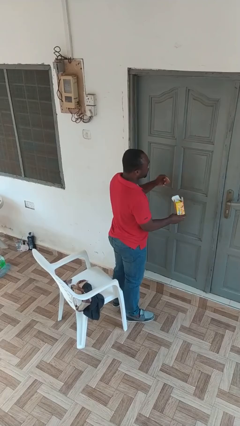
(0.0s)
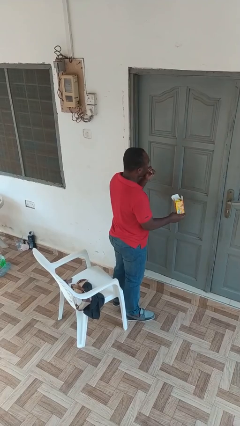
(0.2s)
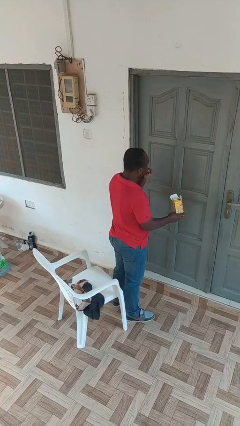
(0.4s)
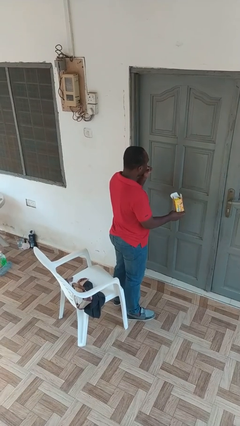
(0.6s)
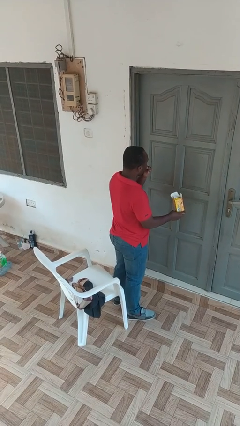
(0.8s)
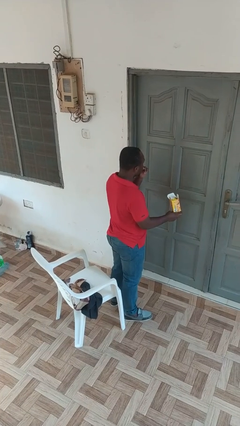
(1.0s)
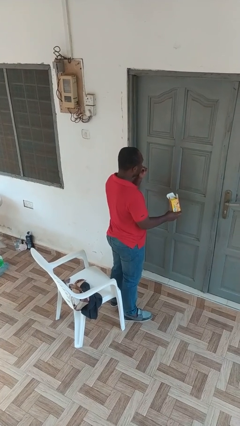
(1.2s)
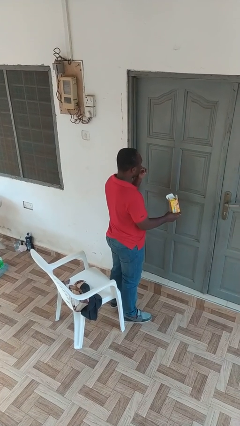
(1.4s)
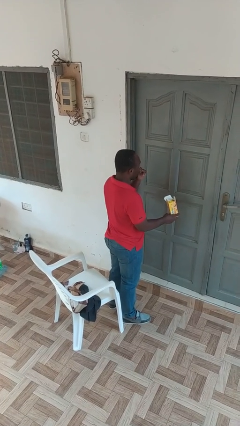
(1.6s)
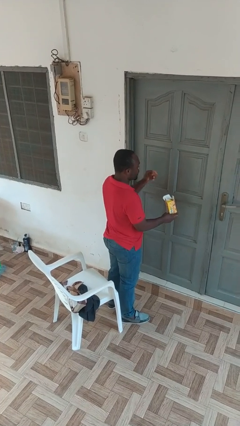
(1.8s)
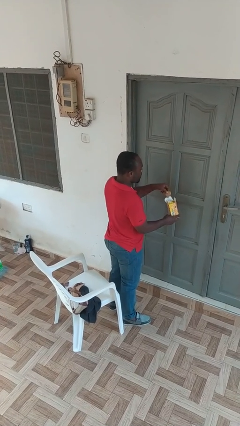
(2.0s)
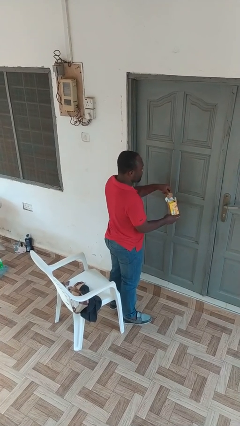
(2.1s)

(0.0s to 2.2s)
person eats snack from bag

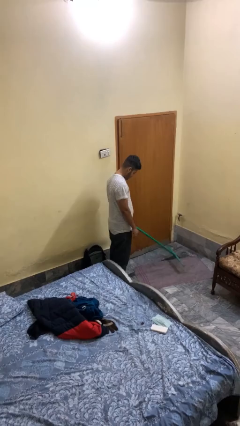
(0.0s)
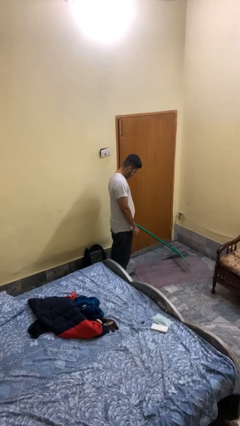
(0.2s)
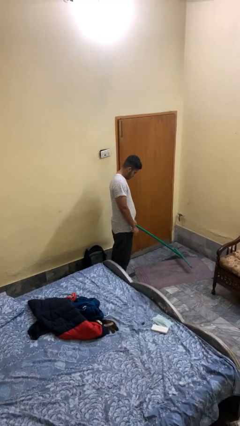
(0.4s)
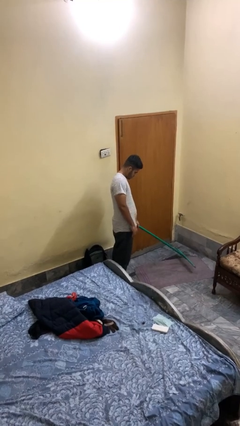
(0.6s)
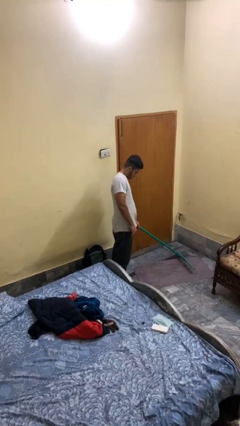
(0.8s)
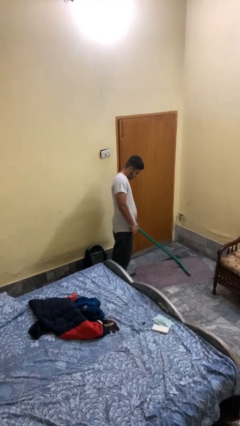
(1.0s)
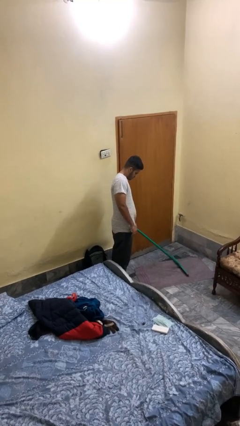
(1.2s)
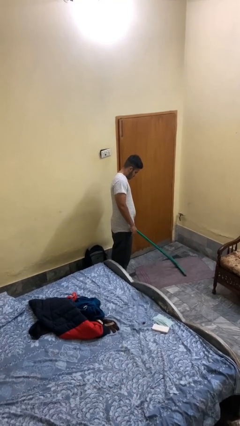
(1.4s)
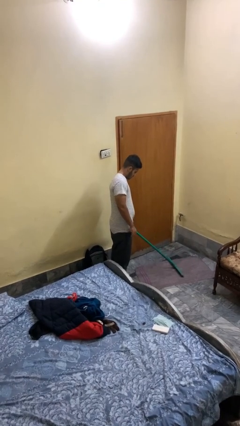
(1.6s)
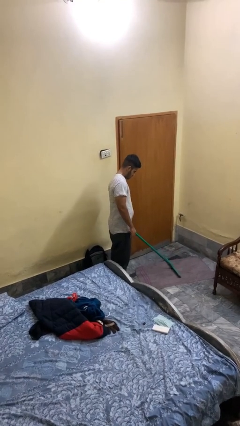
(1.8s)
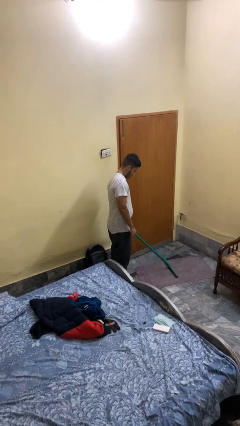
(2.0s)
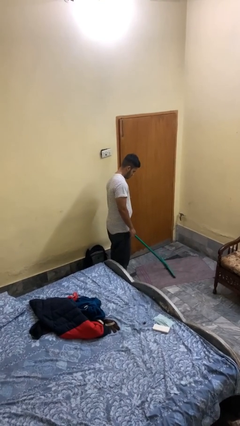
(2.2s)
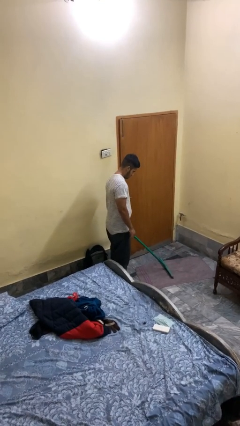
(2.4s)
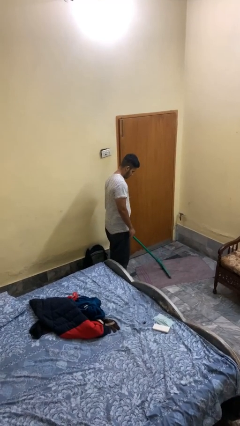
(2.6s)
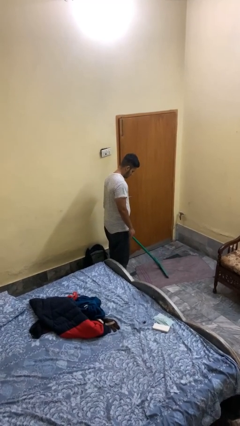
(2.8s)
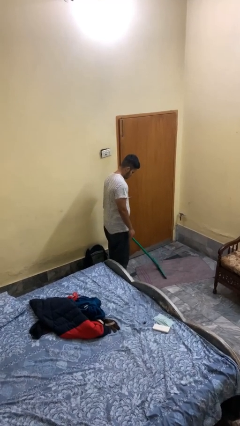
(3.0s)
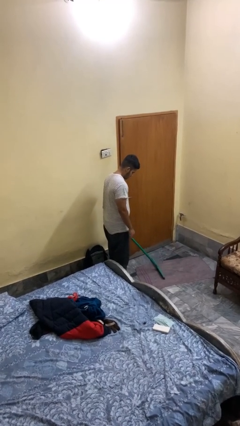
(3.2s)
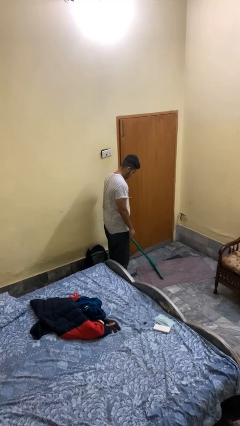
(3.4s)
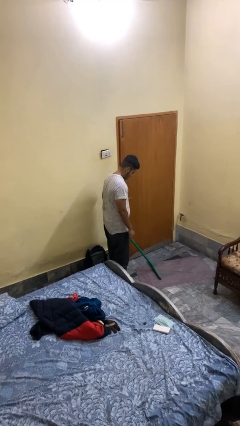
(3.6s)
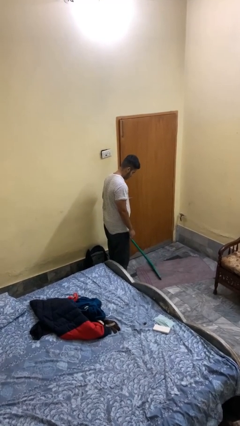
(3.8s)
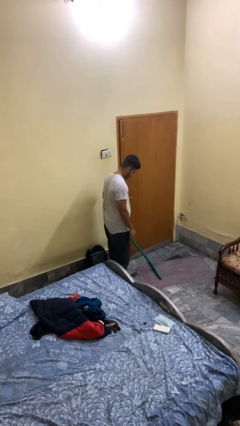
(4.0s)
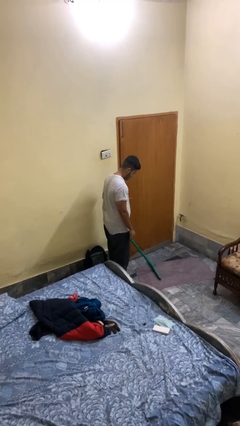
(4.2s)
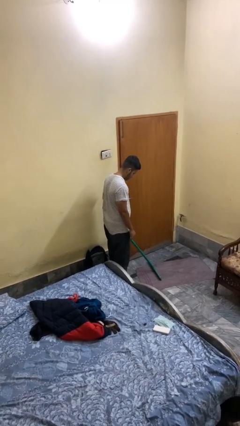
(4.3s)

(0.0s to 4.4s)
person vacuums carpet

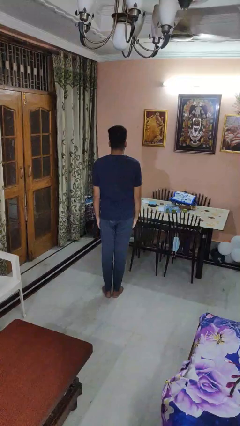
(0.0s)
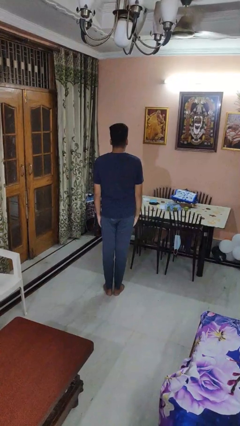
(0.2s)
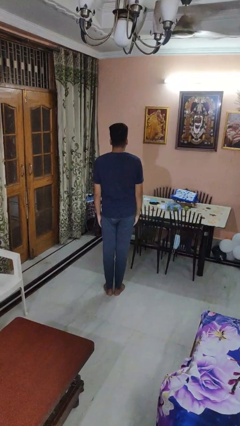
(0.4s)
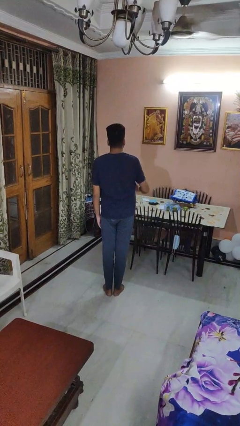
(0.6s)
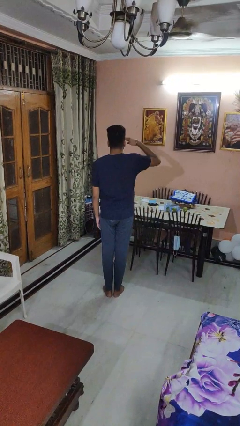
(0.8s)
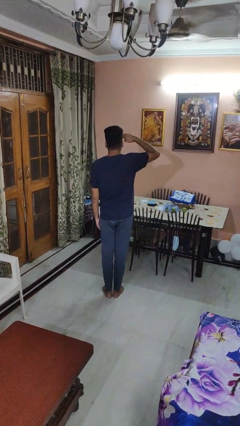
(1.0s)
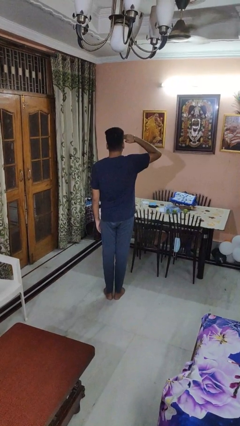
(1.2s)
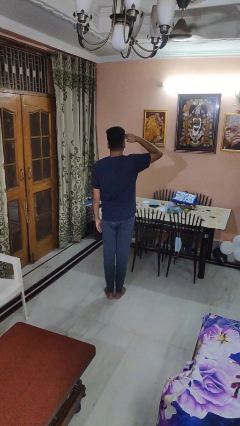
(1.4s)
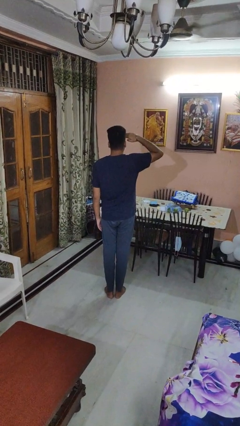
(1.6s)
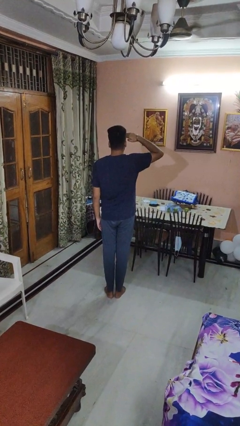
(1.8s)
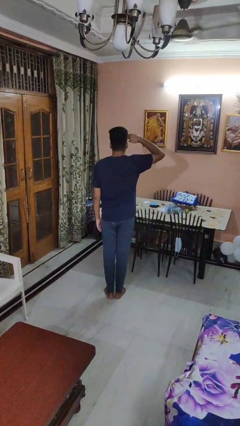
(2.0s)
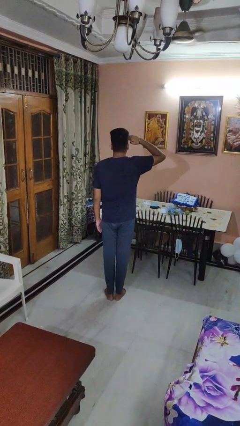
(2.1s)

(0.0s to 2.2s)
person salutes

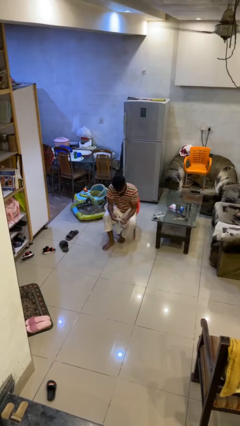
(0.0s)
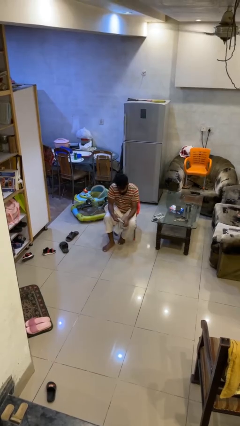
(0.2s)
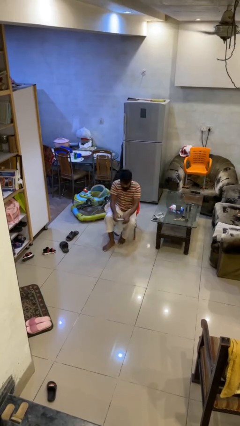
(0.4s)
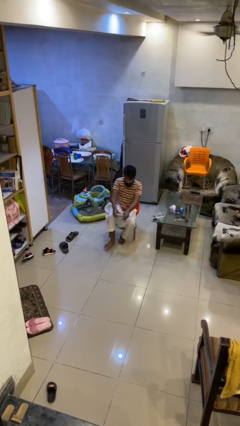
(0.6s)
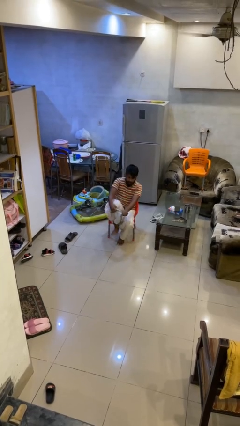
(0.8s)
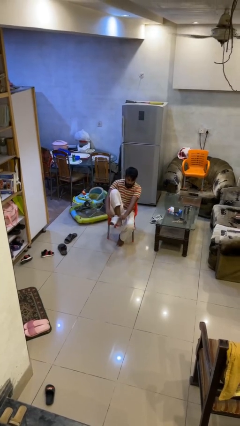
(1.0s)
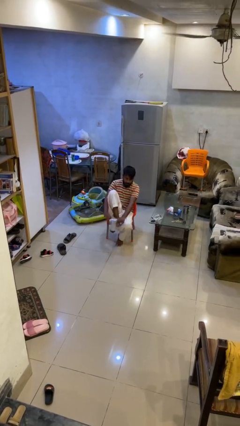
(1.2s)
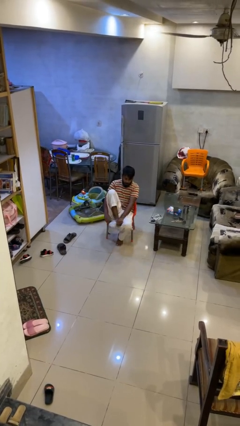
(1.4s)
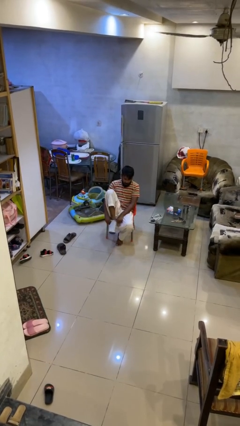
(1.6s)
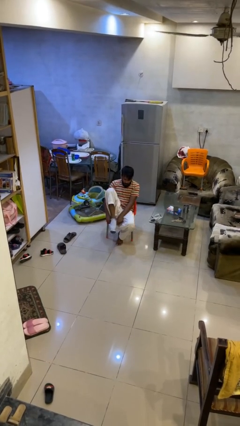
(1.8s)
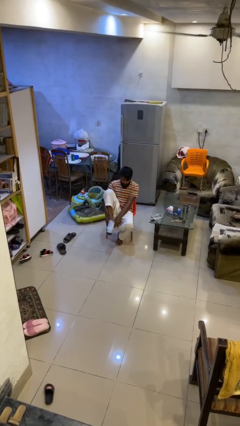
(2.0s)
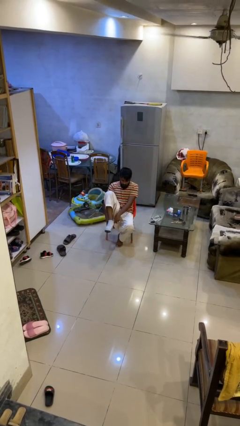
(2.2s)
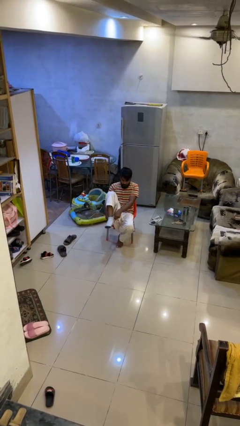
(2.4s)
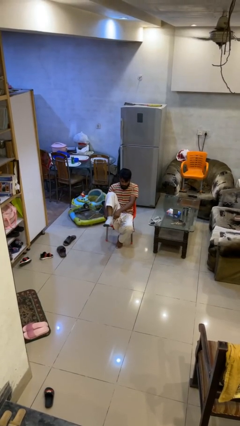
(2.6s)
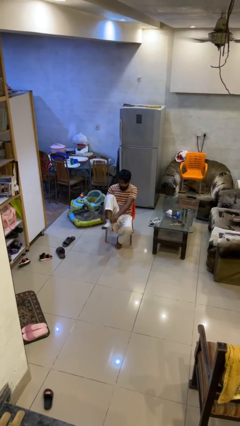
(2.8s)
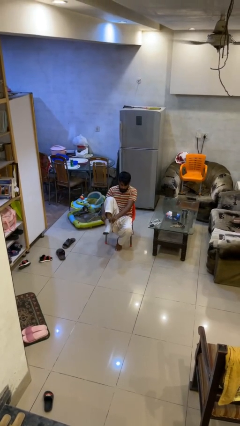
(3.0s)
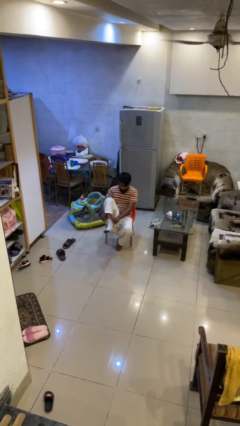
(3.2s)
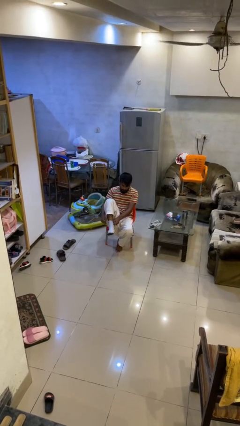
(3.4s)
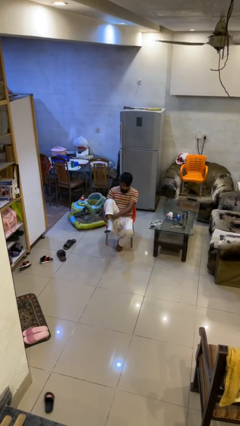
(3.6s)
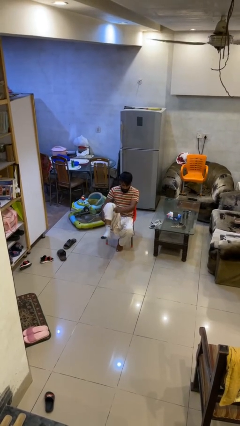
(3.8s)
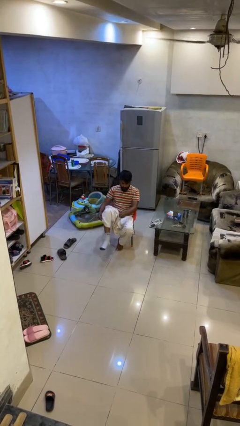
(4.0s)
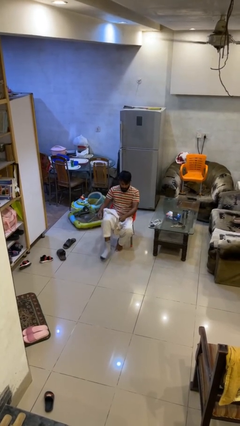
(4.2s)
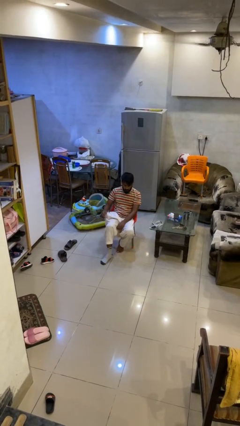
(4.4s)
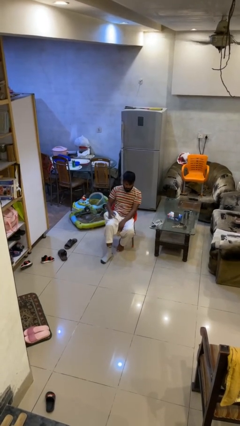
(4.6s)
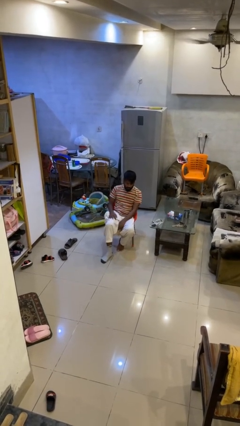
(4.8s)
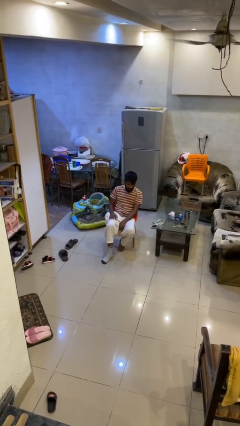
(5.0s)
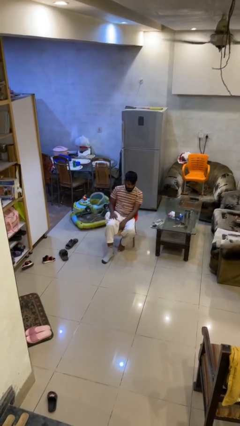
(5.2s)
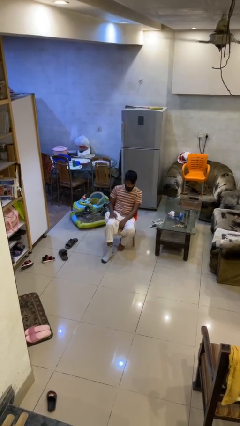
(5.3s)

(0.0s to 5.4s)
person puts on socks

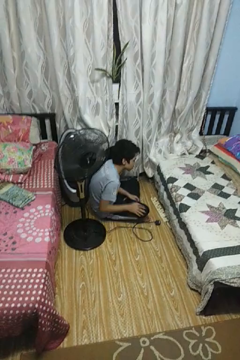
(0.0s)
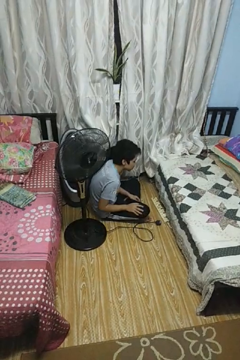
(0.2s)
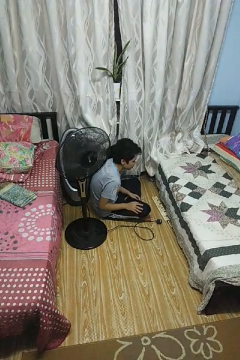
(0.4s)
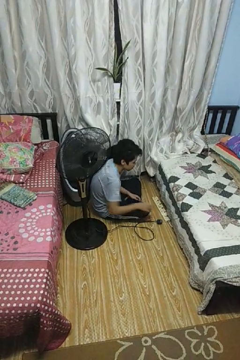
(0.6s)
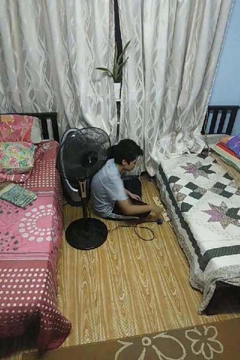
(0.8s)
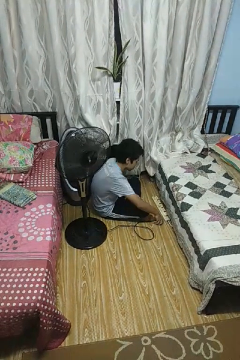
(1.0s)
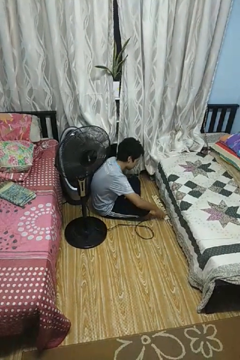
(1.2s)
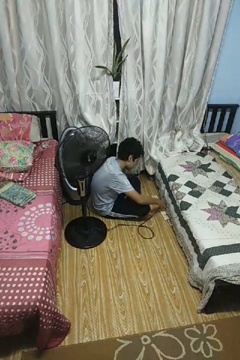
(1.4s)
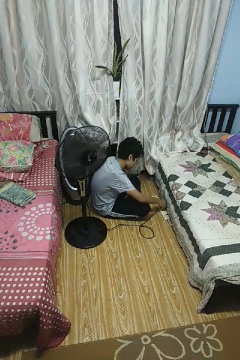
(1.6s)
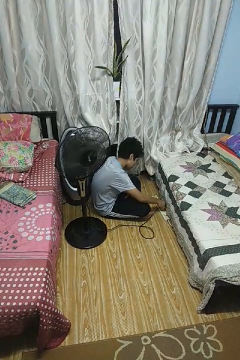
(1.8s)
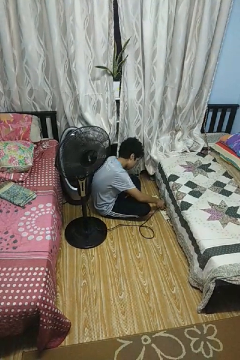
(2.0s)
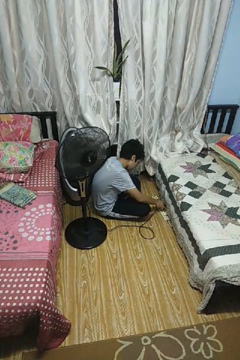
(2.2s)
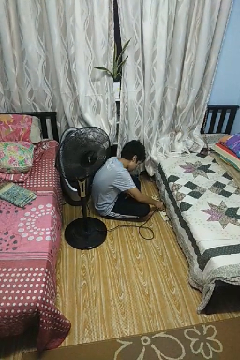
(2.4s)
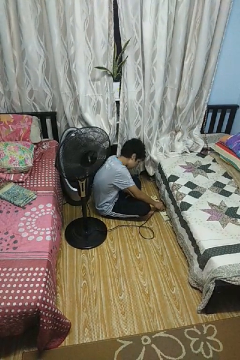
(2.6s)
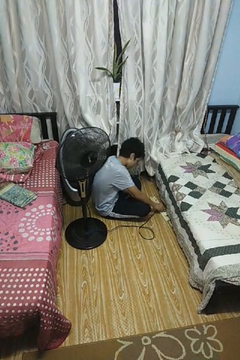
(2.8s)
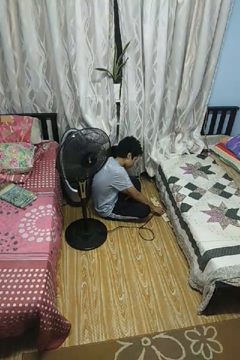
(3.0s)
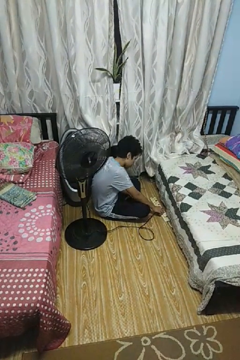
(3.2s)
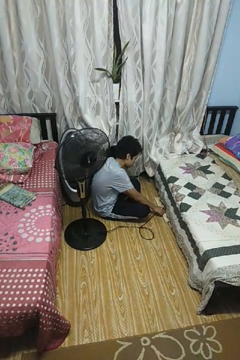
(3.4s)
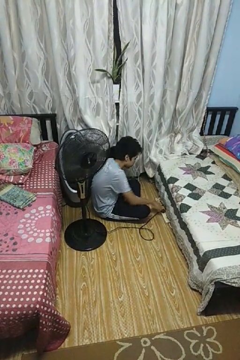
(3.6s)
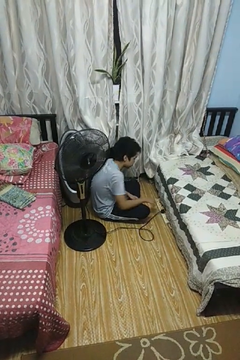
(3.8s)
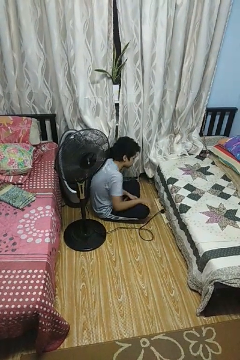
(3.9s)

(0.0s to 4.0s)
person plugs into electrical socket
